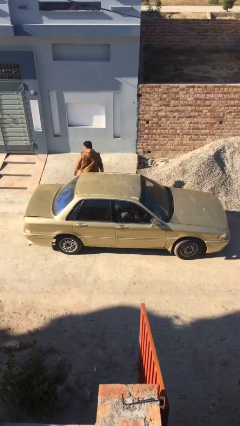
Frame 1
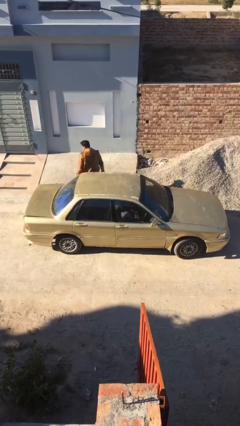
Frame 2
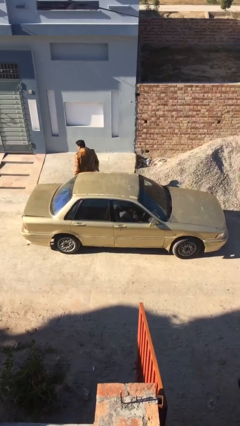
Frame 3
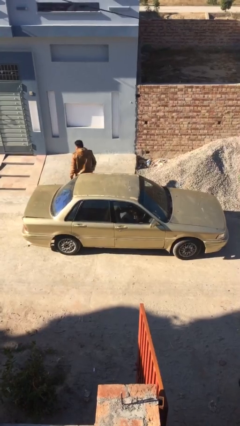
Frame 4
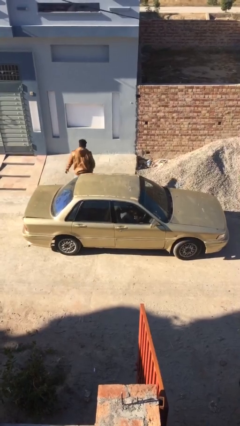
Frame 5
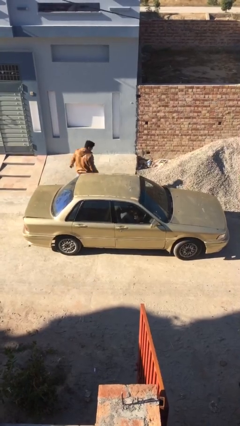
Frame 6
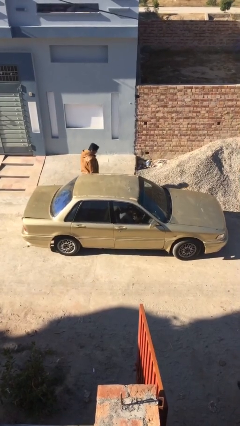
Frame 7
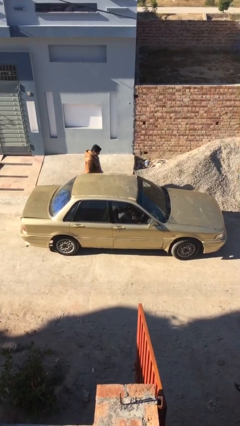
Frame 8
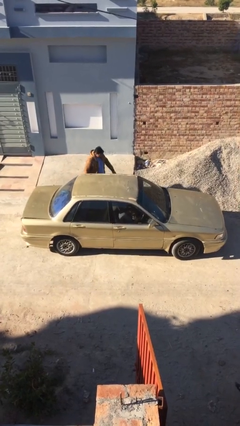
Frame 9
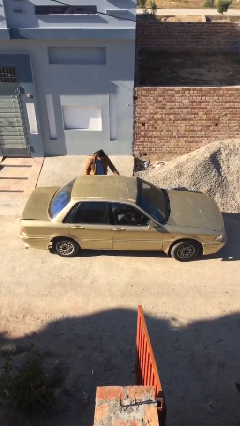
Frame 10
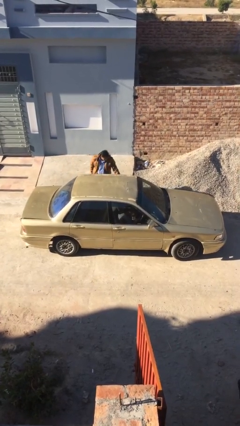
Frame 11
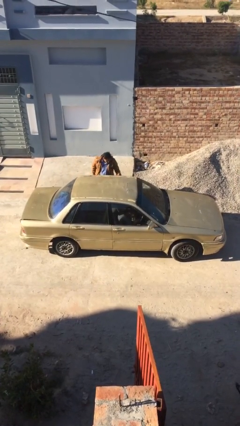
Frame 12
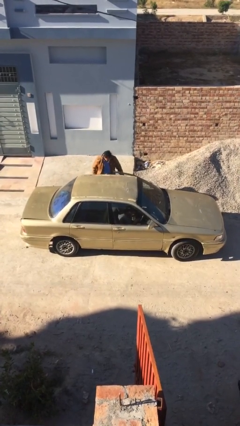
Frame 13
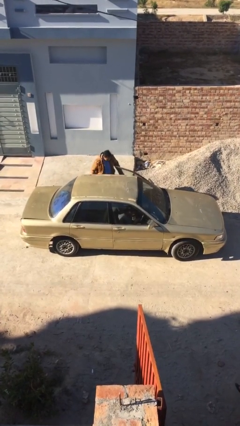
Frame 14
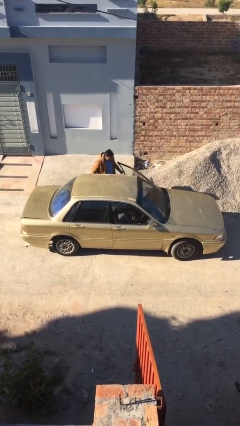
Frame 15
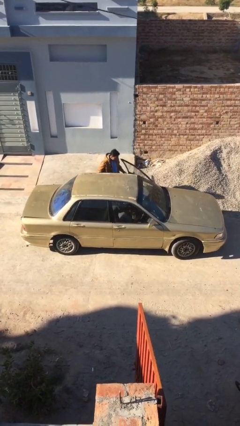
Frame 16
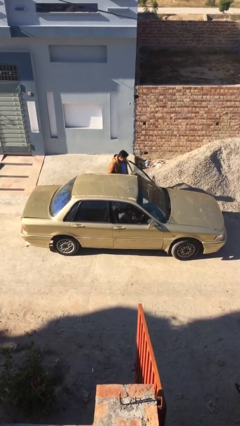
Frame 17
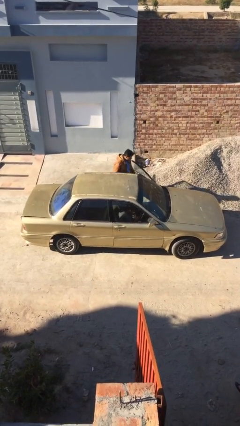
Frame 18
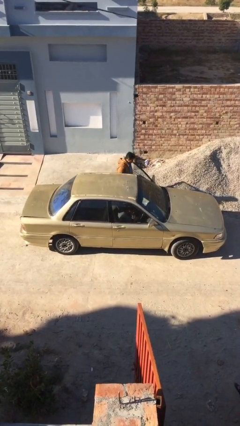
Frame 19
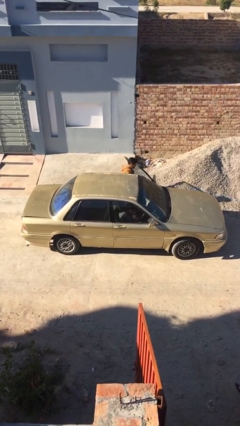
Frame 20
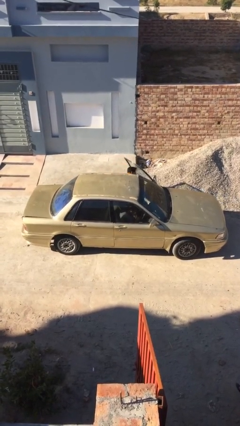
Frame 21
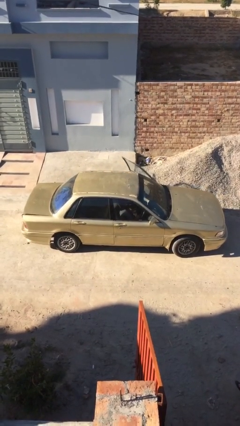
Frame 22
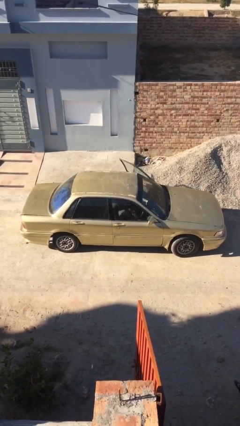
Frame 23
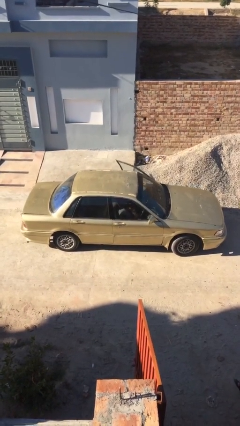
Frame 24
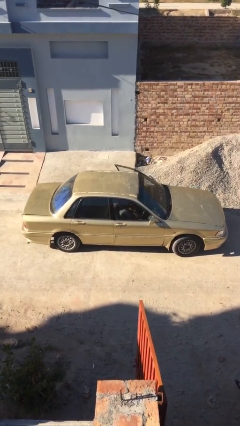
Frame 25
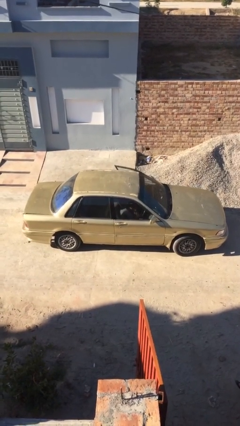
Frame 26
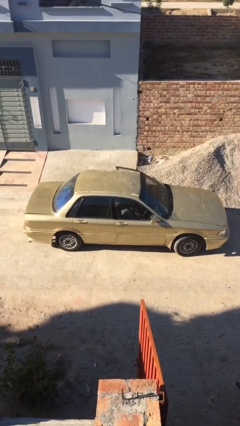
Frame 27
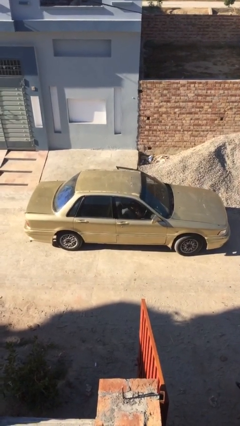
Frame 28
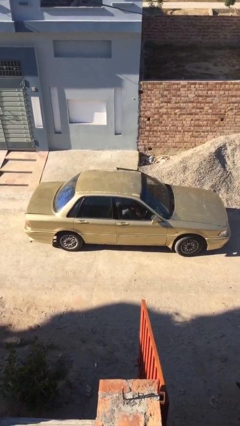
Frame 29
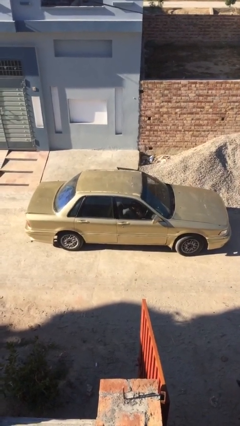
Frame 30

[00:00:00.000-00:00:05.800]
car picks up person

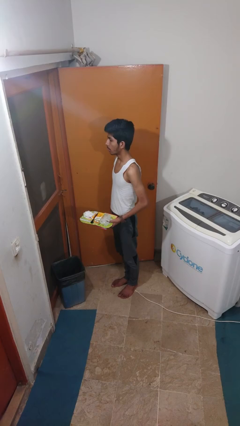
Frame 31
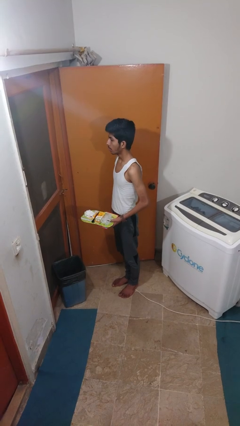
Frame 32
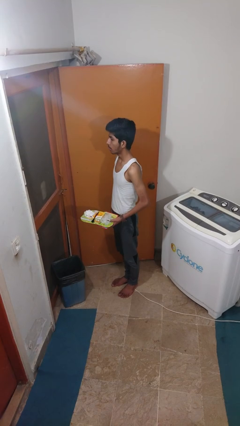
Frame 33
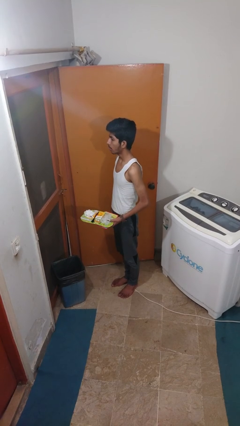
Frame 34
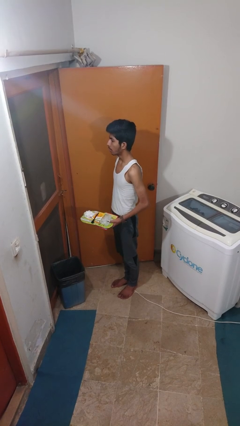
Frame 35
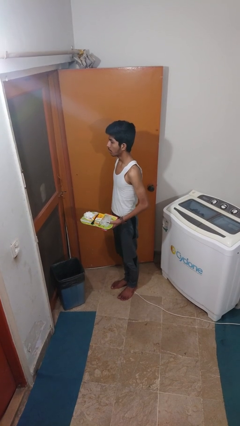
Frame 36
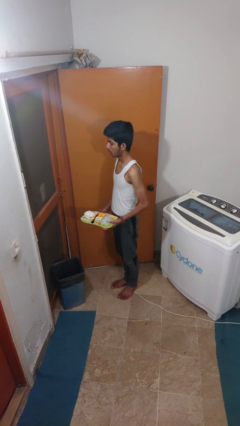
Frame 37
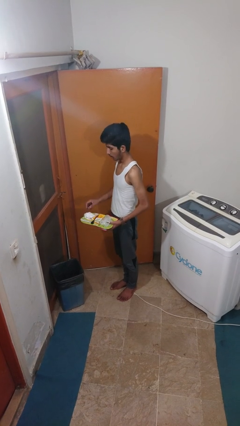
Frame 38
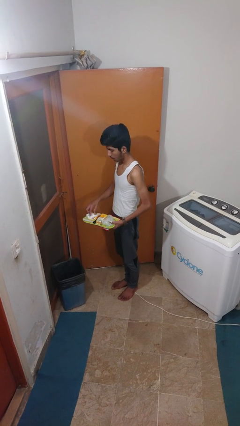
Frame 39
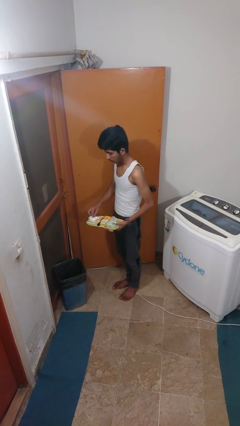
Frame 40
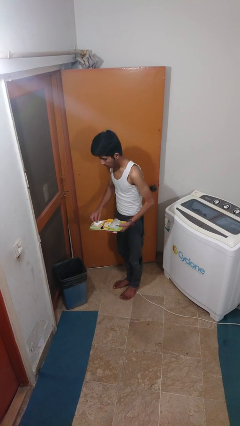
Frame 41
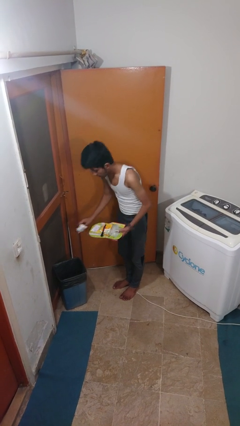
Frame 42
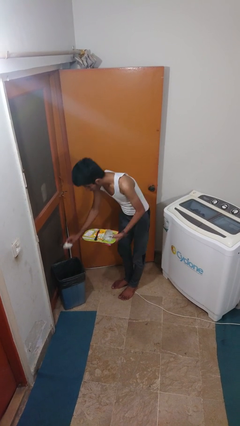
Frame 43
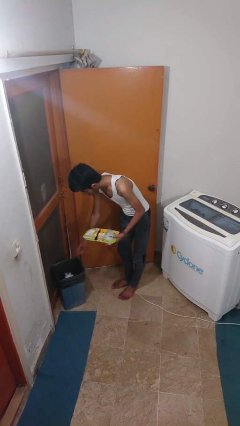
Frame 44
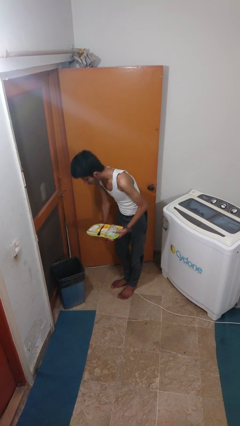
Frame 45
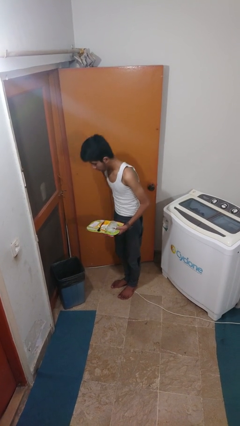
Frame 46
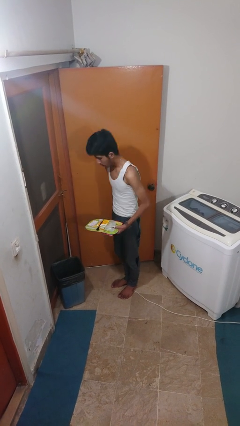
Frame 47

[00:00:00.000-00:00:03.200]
person discards trash

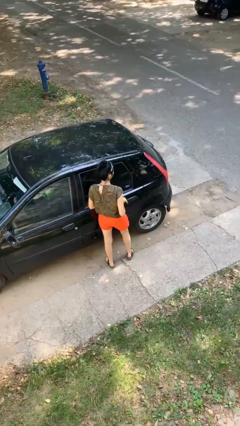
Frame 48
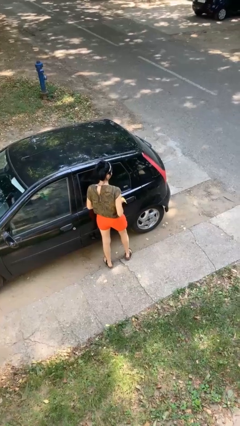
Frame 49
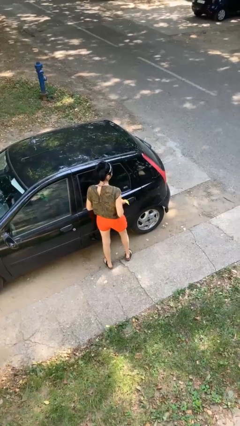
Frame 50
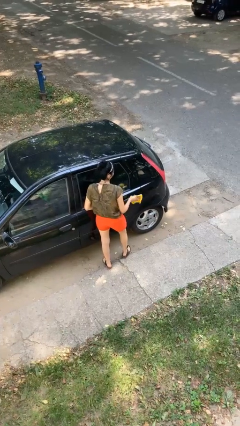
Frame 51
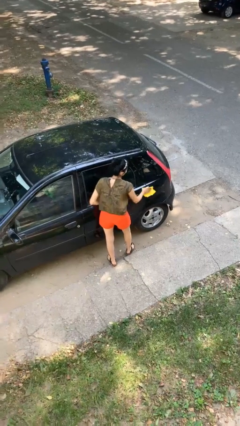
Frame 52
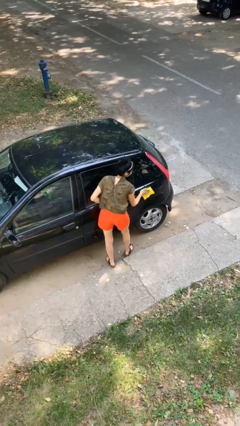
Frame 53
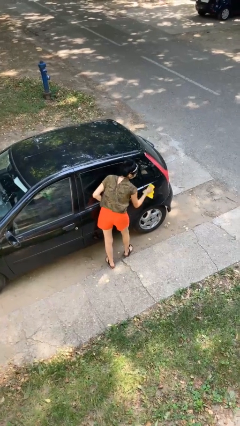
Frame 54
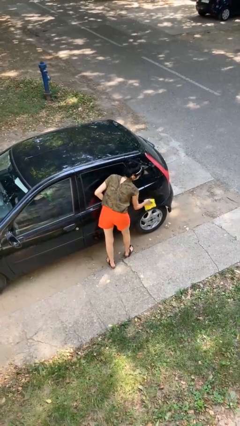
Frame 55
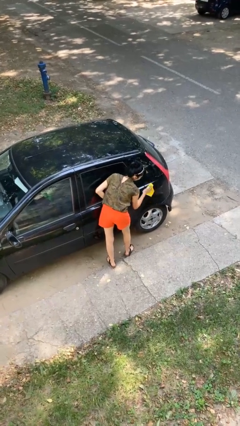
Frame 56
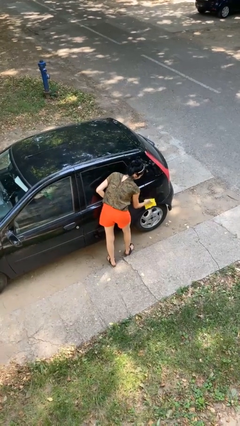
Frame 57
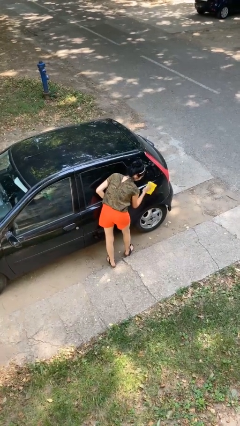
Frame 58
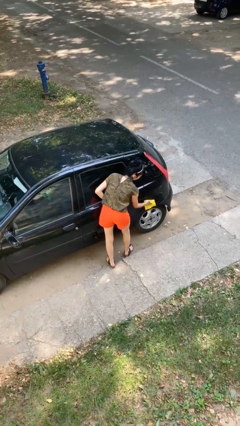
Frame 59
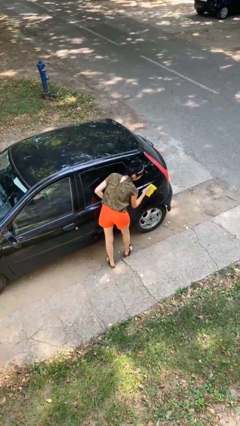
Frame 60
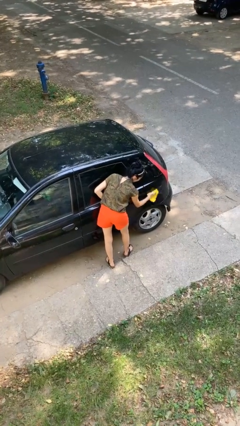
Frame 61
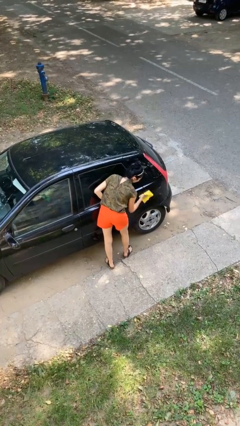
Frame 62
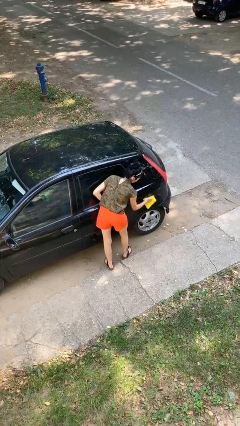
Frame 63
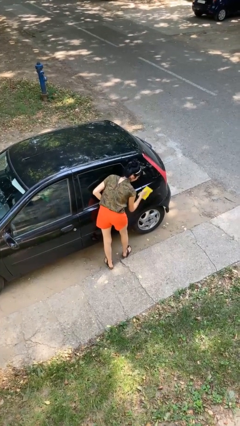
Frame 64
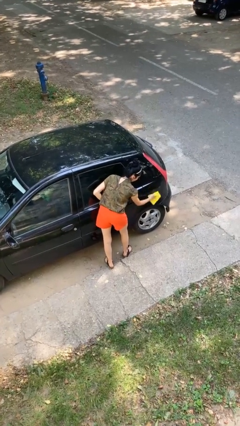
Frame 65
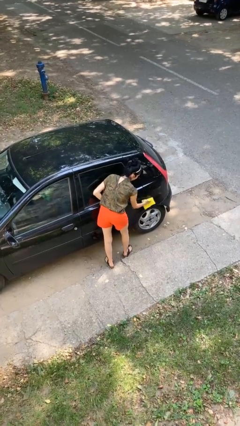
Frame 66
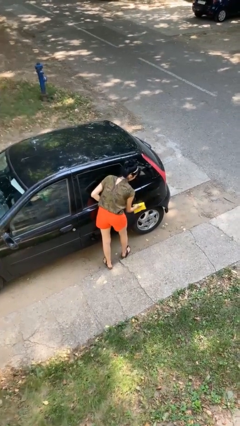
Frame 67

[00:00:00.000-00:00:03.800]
person polishes car with rag

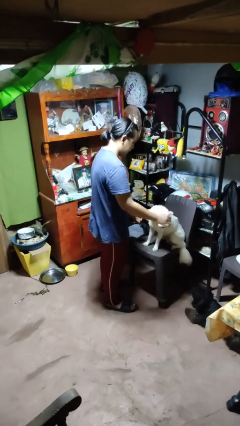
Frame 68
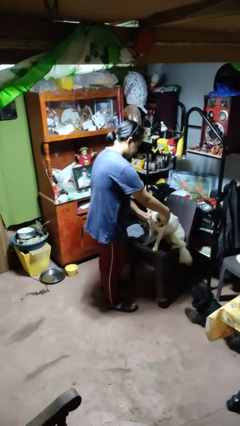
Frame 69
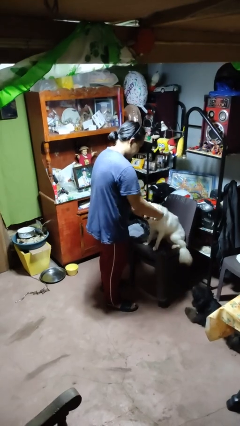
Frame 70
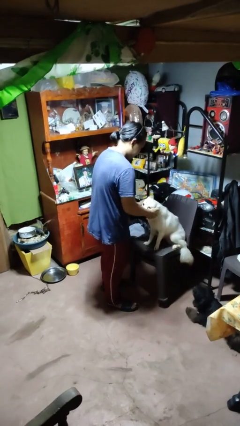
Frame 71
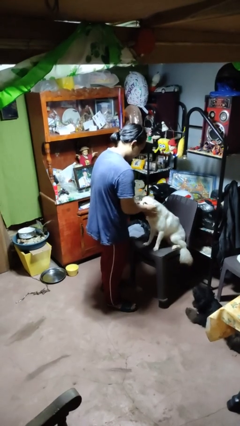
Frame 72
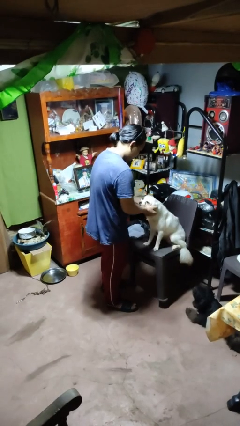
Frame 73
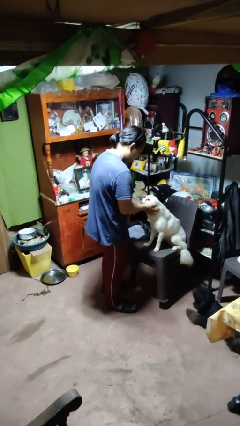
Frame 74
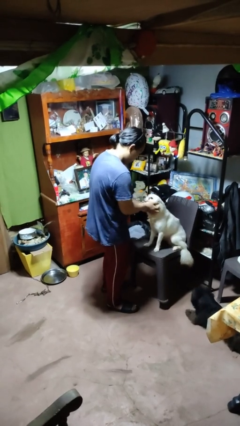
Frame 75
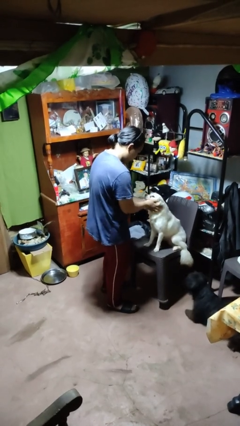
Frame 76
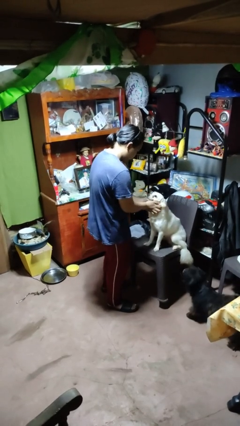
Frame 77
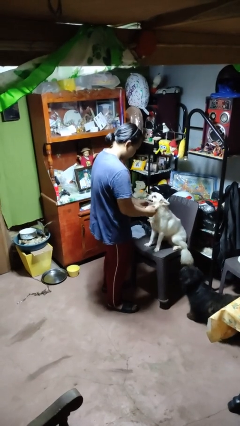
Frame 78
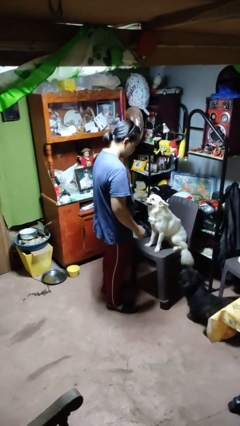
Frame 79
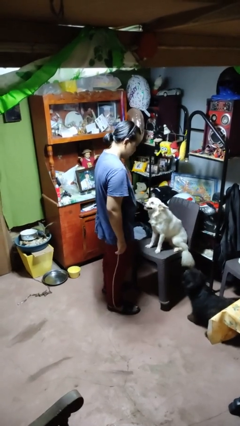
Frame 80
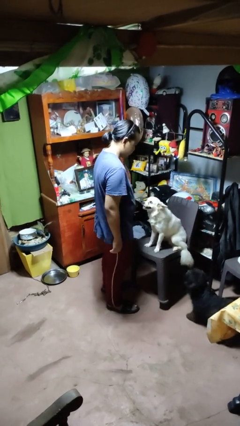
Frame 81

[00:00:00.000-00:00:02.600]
person pets dog

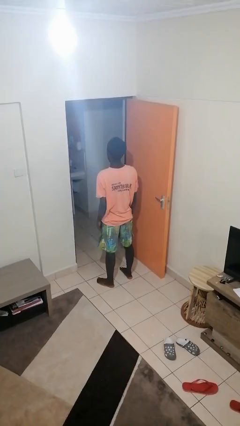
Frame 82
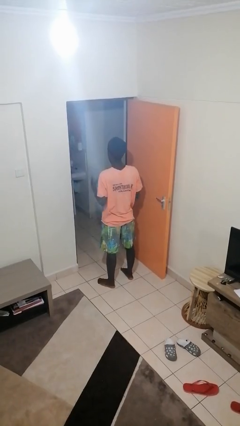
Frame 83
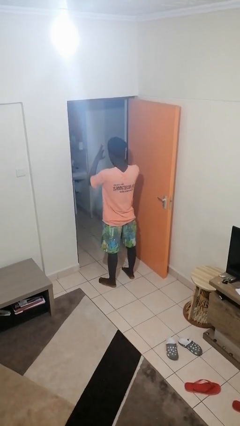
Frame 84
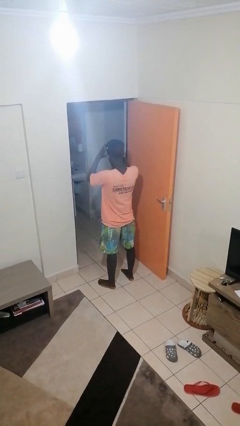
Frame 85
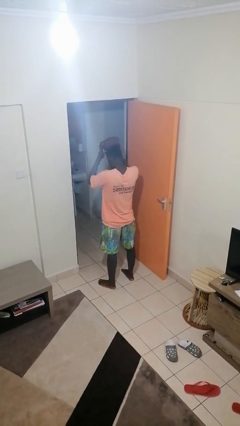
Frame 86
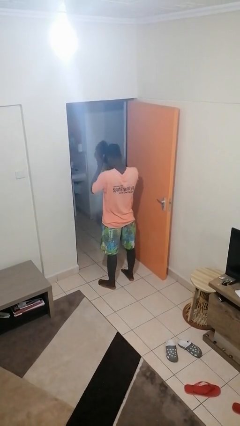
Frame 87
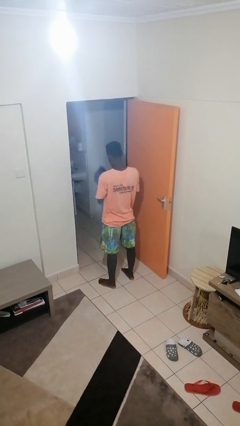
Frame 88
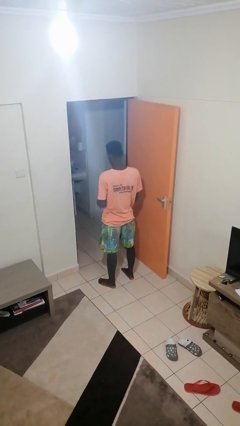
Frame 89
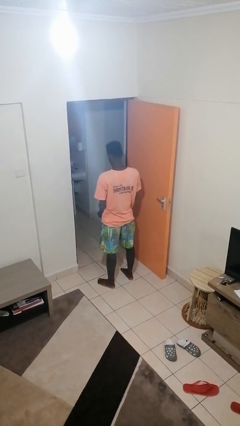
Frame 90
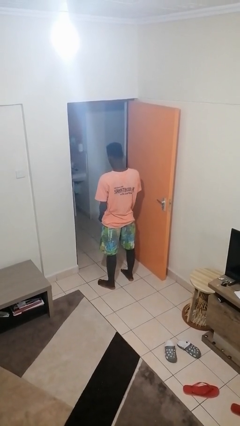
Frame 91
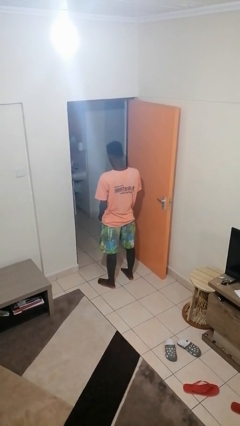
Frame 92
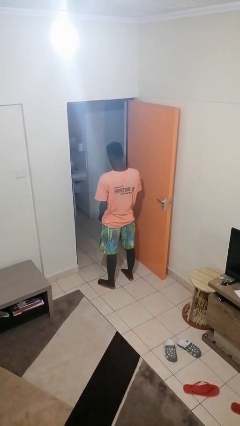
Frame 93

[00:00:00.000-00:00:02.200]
person takes off hat

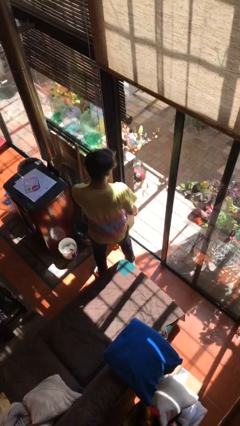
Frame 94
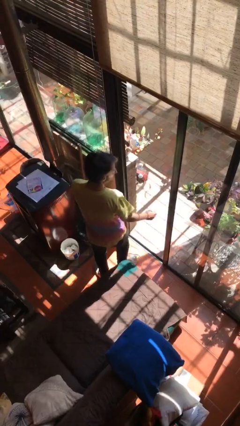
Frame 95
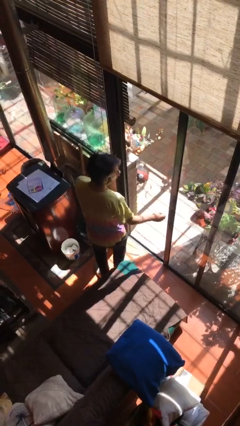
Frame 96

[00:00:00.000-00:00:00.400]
person closes facility door
